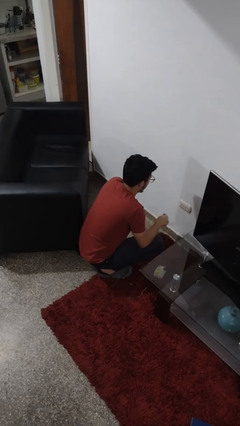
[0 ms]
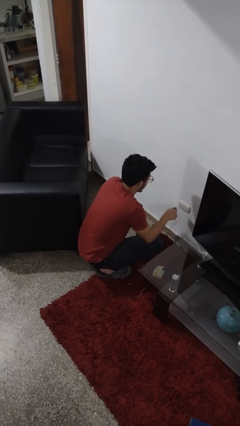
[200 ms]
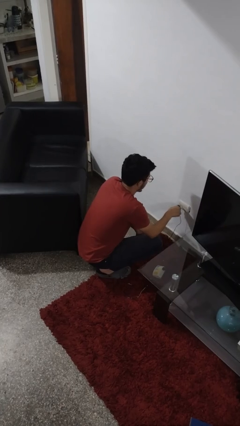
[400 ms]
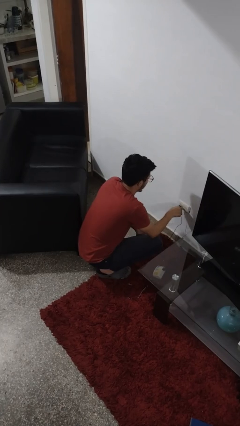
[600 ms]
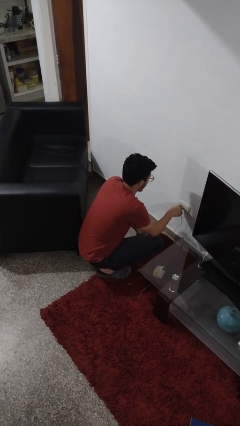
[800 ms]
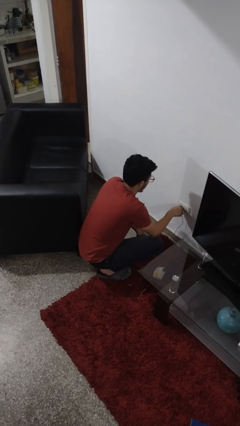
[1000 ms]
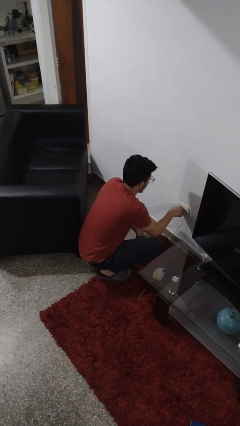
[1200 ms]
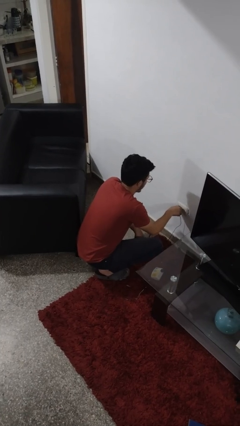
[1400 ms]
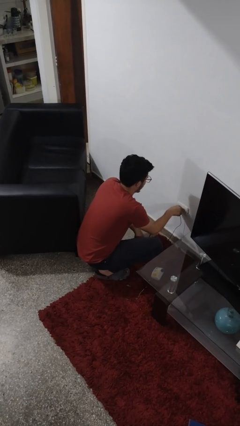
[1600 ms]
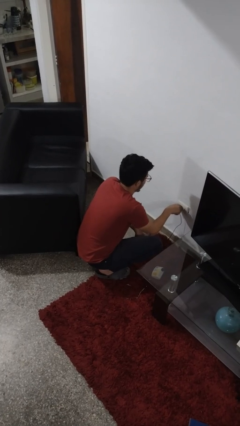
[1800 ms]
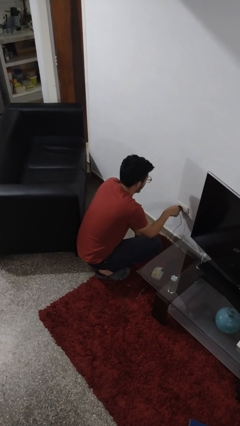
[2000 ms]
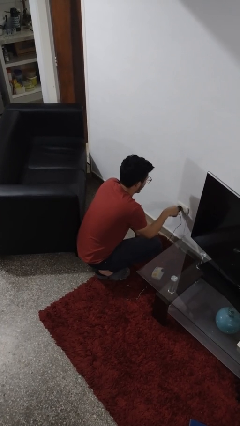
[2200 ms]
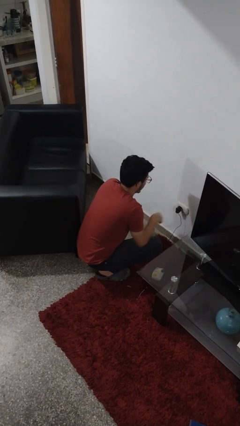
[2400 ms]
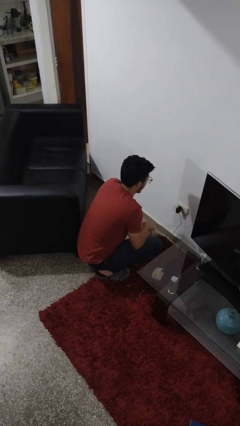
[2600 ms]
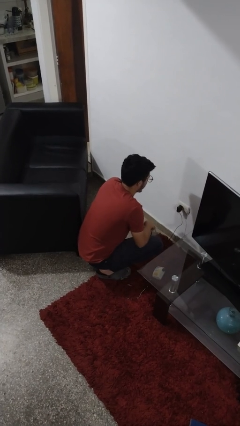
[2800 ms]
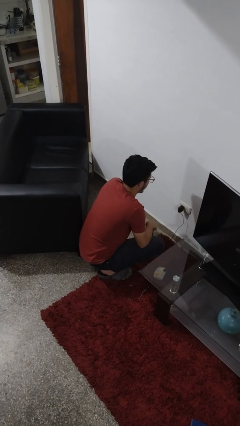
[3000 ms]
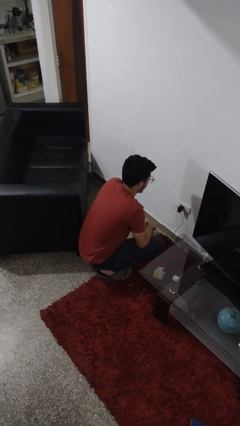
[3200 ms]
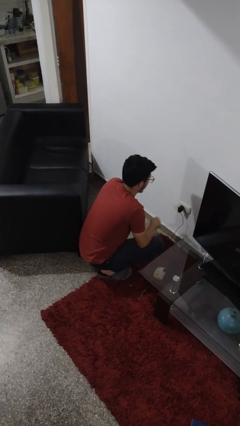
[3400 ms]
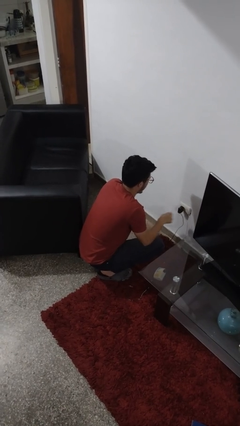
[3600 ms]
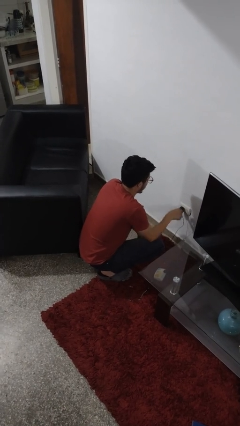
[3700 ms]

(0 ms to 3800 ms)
person plugs into electrical socket

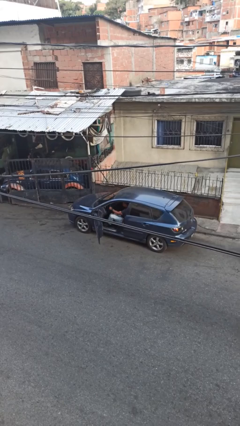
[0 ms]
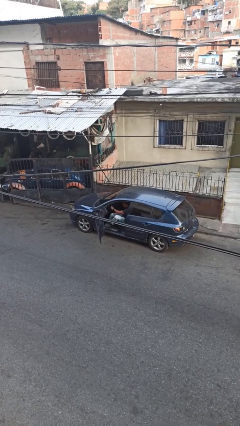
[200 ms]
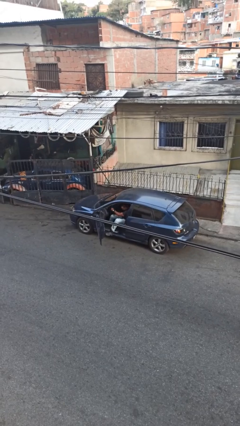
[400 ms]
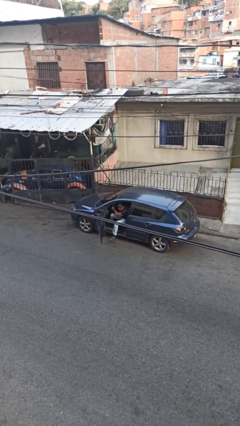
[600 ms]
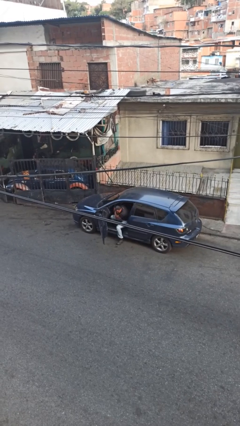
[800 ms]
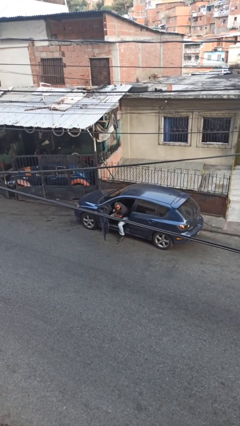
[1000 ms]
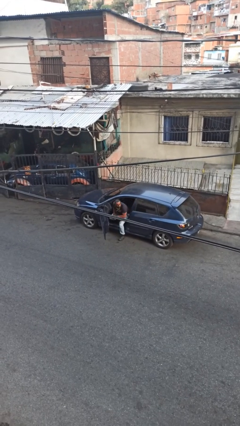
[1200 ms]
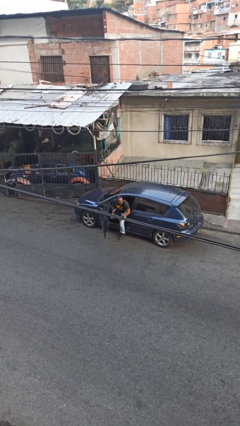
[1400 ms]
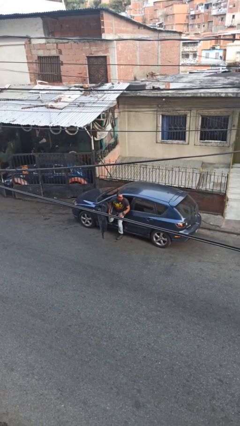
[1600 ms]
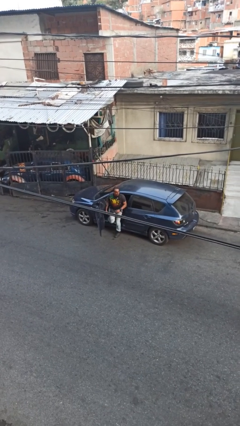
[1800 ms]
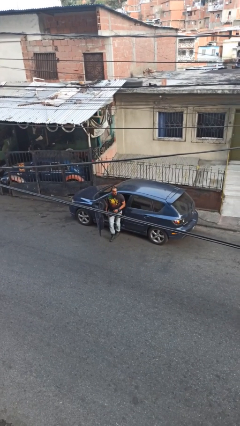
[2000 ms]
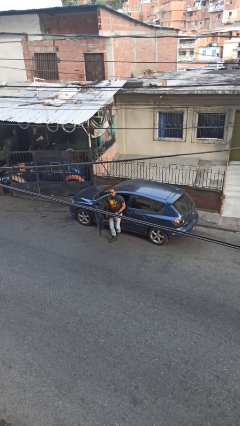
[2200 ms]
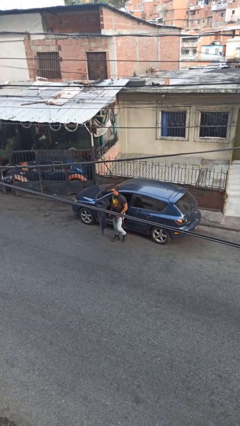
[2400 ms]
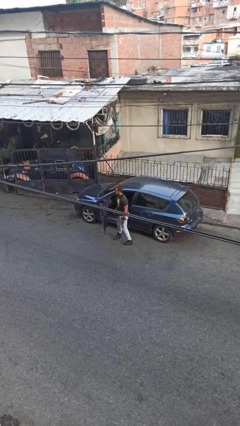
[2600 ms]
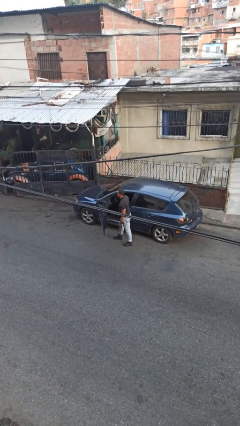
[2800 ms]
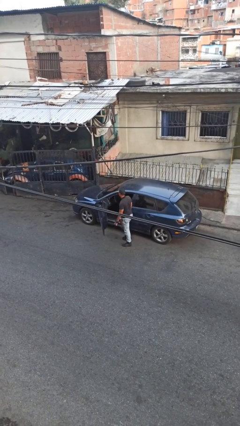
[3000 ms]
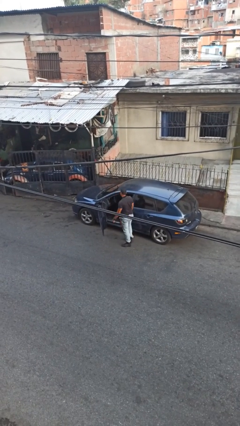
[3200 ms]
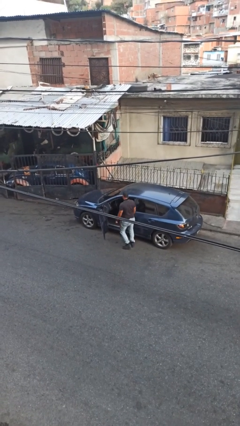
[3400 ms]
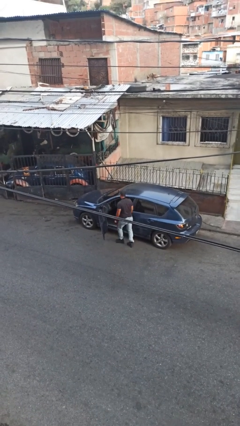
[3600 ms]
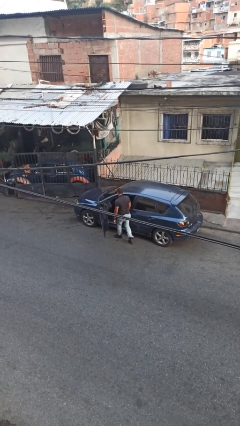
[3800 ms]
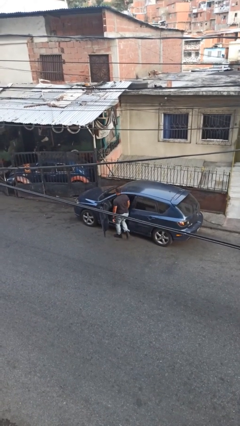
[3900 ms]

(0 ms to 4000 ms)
person exits car

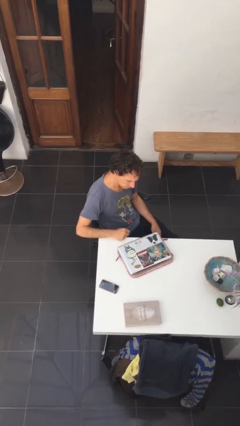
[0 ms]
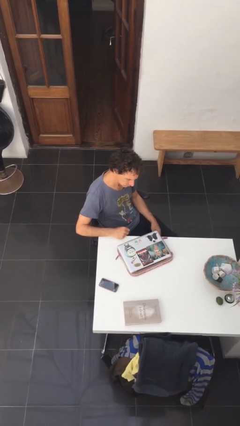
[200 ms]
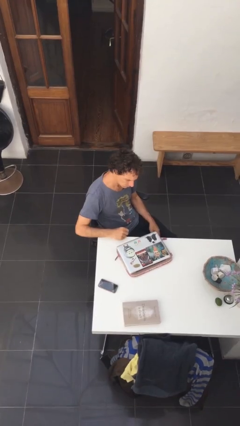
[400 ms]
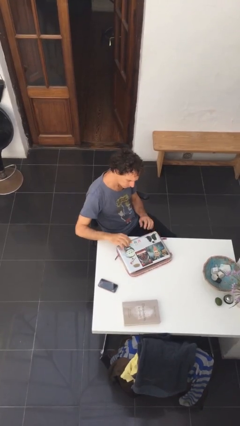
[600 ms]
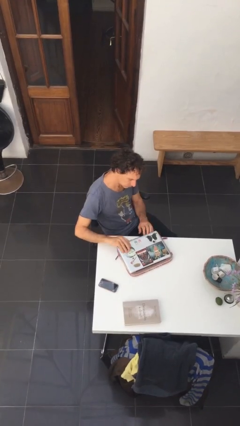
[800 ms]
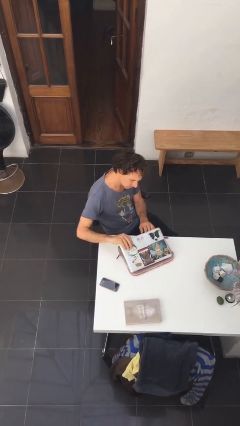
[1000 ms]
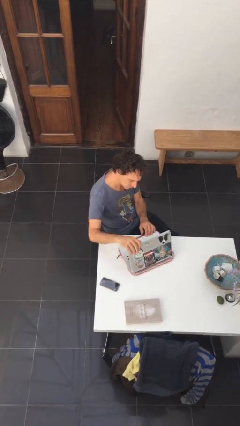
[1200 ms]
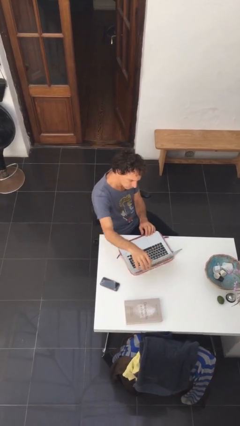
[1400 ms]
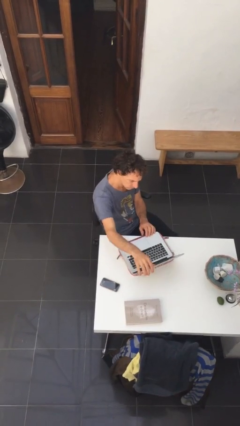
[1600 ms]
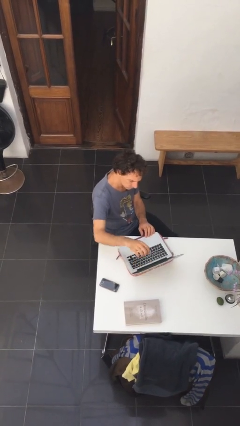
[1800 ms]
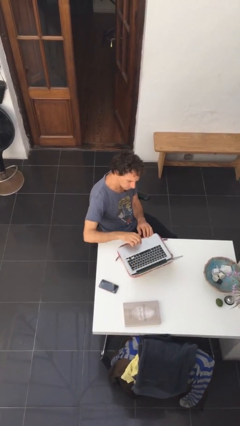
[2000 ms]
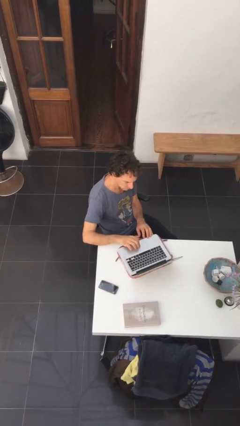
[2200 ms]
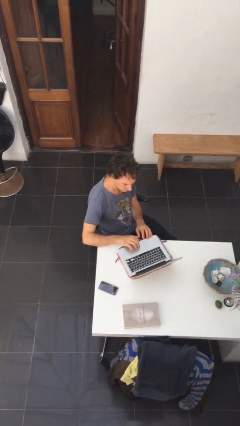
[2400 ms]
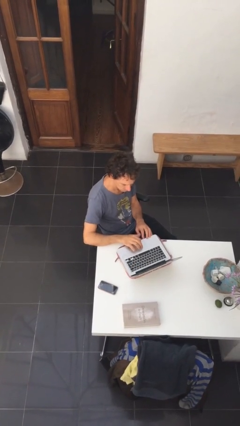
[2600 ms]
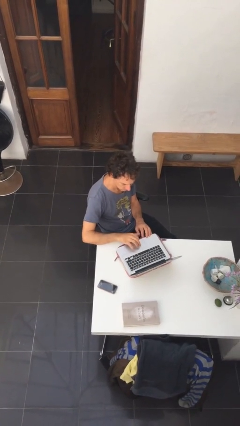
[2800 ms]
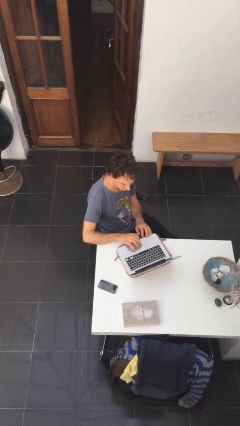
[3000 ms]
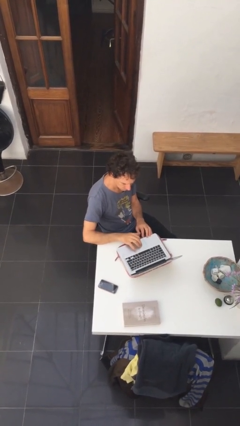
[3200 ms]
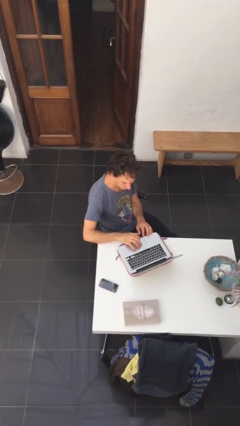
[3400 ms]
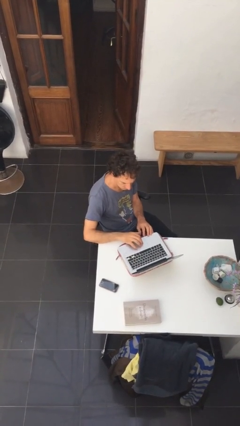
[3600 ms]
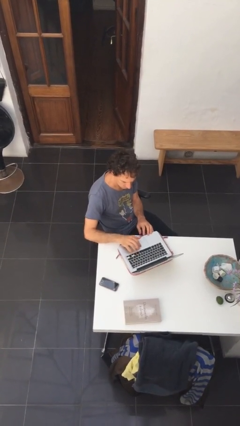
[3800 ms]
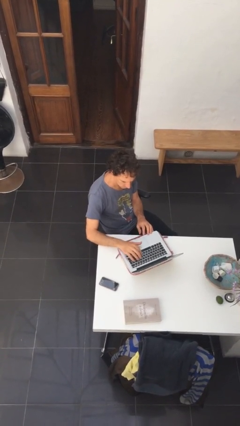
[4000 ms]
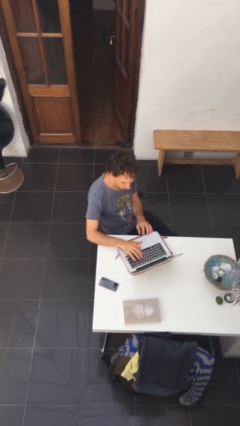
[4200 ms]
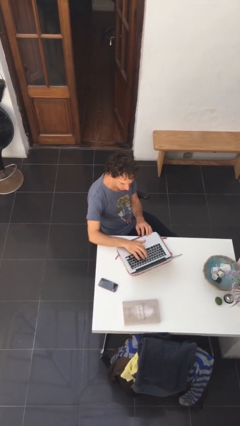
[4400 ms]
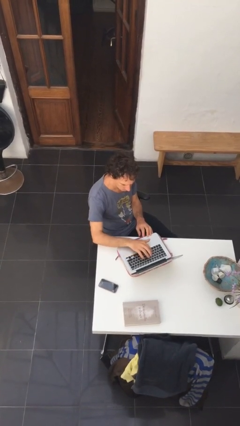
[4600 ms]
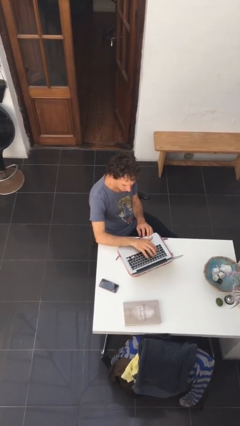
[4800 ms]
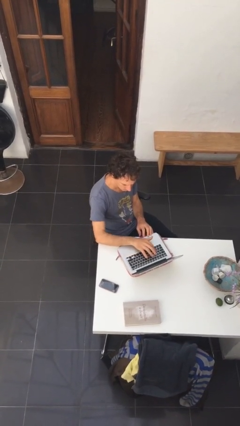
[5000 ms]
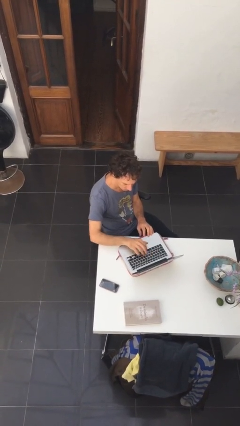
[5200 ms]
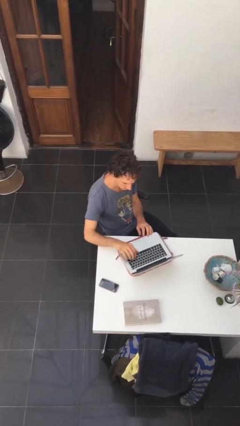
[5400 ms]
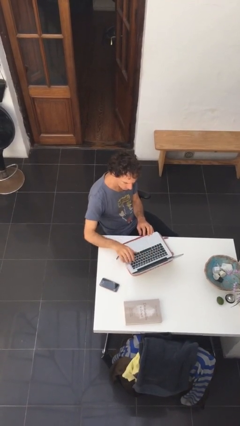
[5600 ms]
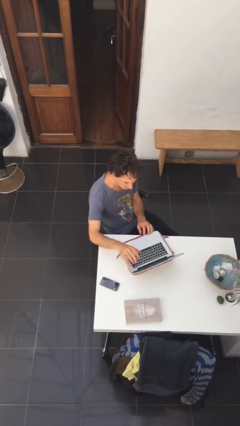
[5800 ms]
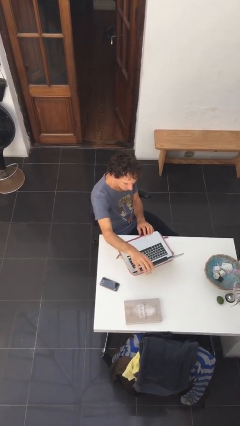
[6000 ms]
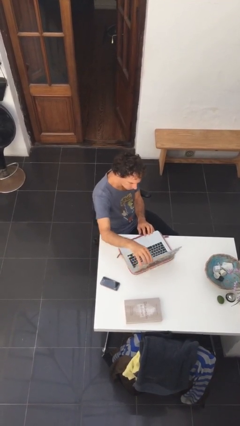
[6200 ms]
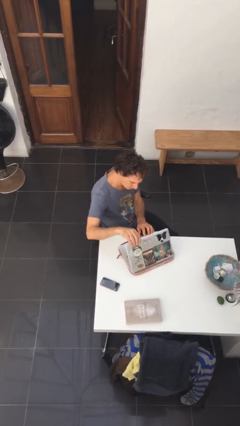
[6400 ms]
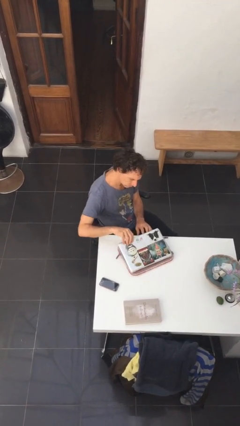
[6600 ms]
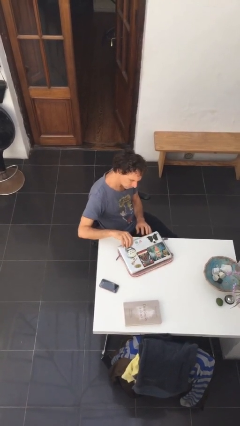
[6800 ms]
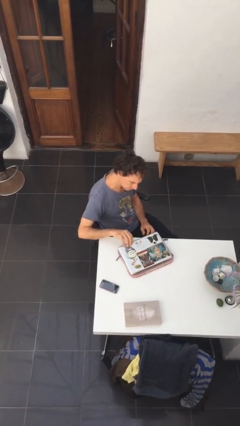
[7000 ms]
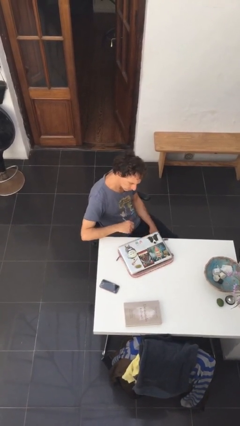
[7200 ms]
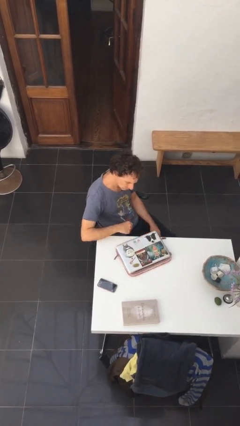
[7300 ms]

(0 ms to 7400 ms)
person interacts with laptop

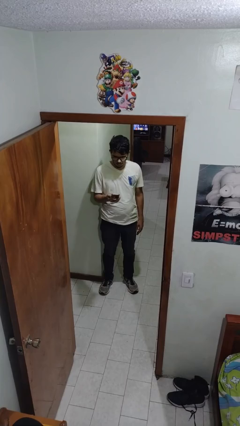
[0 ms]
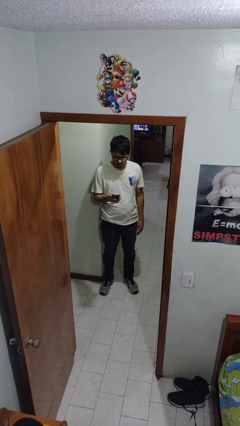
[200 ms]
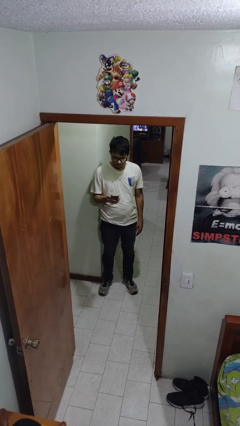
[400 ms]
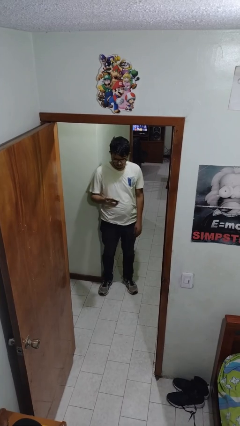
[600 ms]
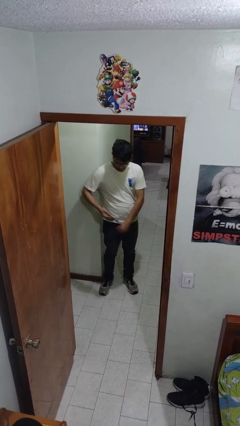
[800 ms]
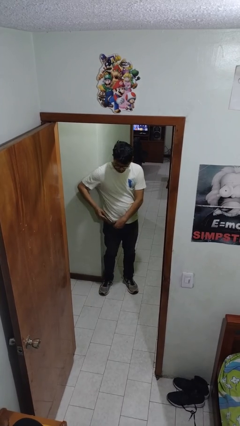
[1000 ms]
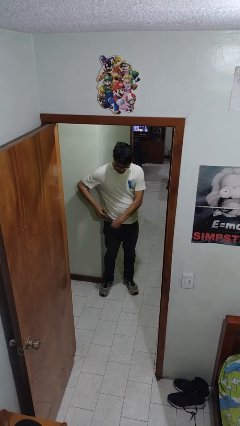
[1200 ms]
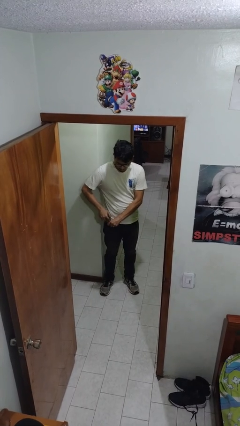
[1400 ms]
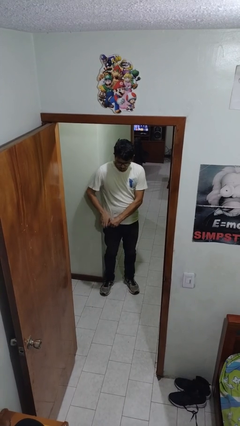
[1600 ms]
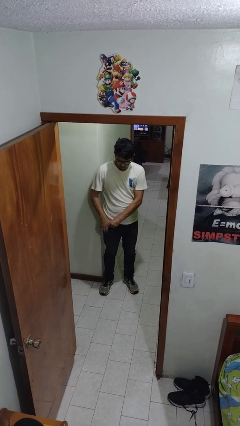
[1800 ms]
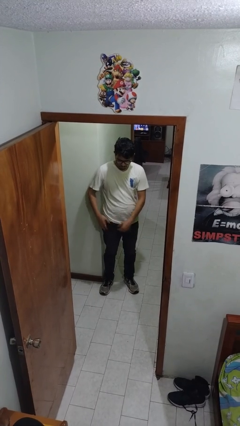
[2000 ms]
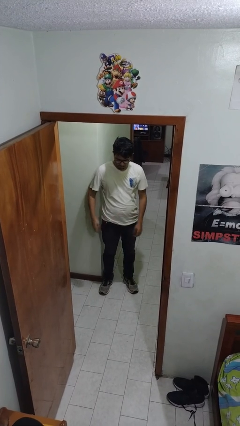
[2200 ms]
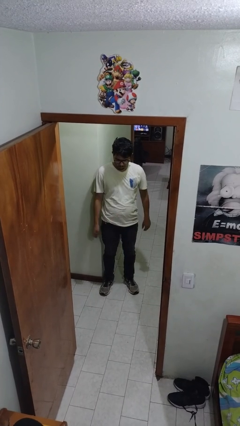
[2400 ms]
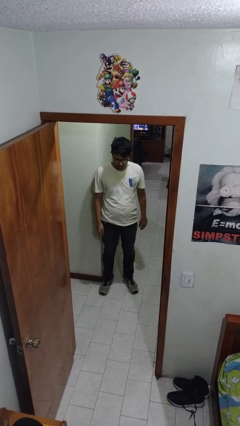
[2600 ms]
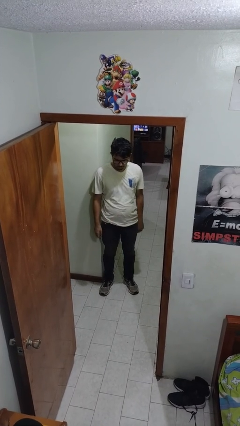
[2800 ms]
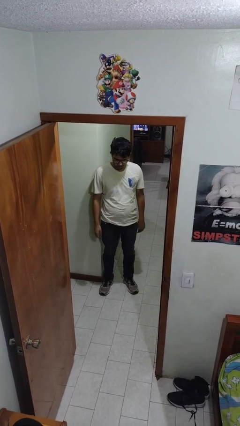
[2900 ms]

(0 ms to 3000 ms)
person puts phone into pocket
